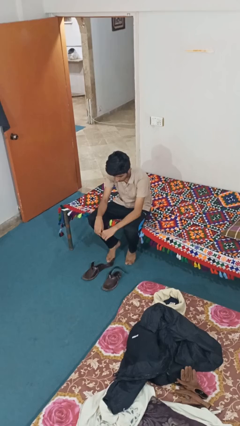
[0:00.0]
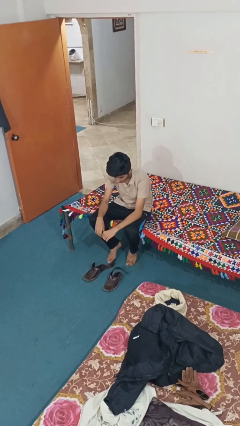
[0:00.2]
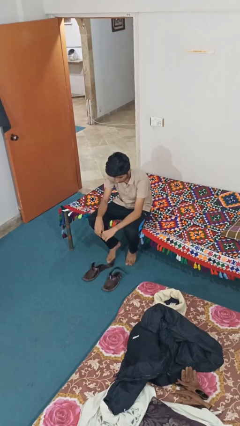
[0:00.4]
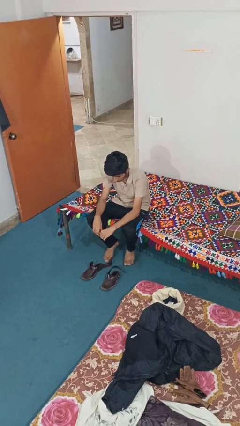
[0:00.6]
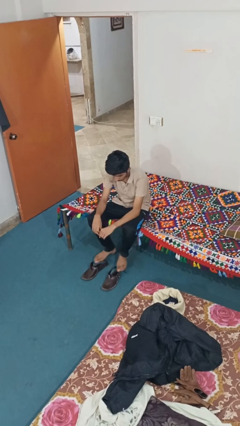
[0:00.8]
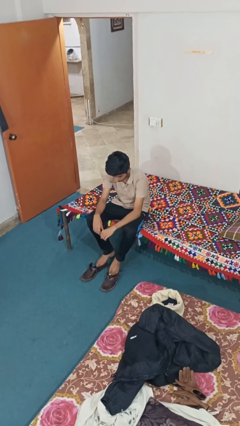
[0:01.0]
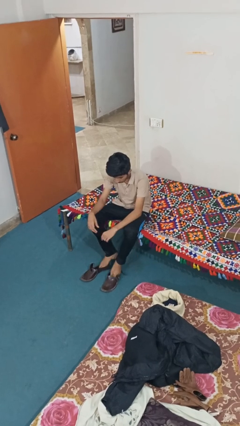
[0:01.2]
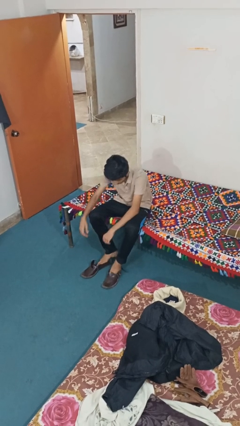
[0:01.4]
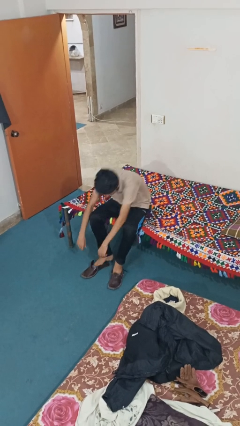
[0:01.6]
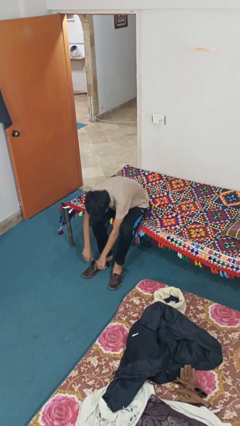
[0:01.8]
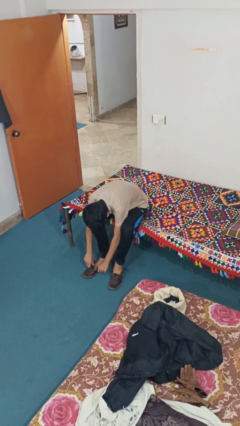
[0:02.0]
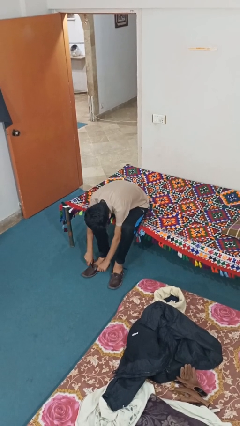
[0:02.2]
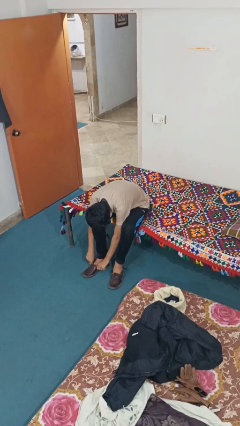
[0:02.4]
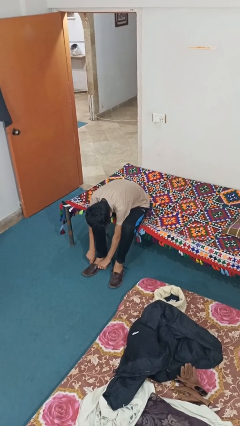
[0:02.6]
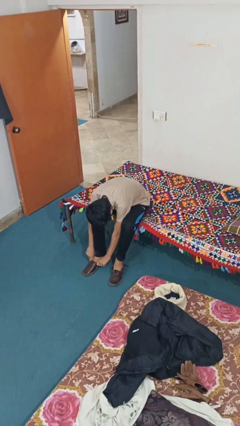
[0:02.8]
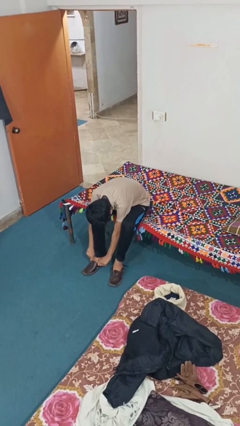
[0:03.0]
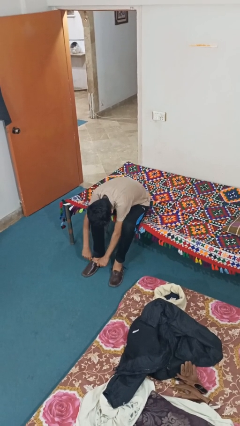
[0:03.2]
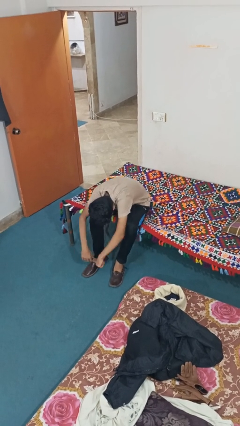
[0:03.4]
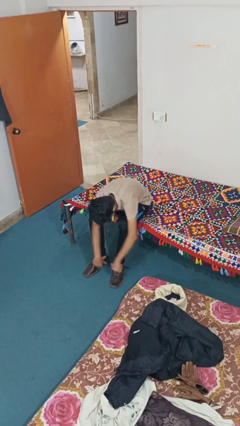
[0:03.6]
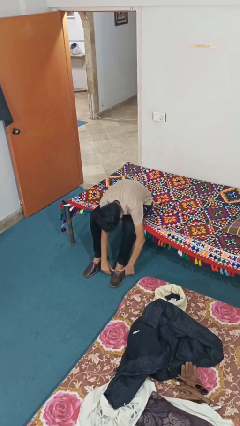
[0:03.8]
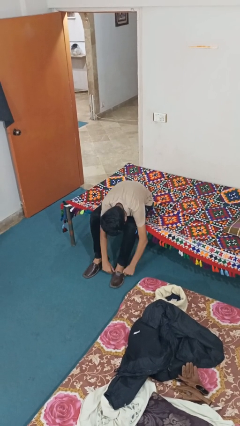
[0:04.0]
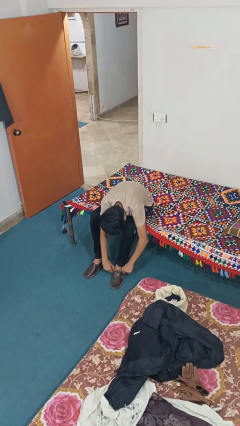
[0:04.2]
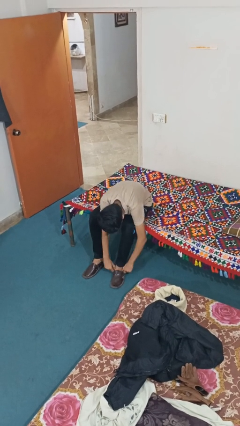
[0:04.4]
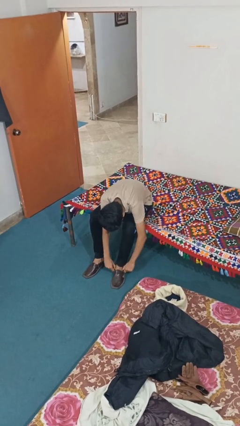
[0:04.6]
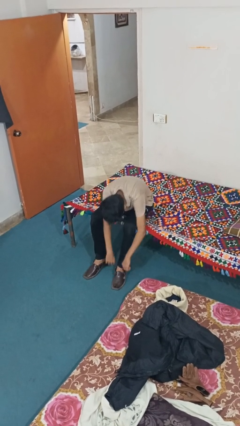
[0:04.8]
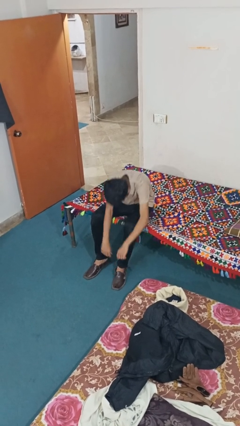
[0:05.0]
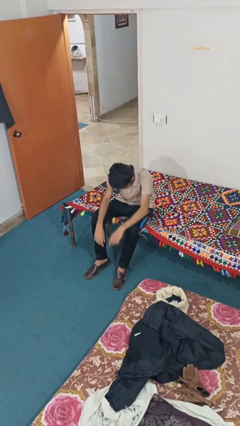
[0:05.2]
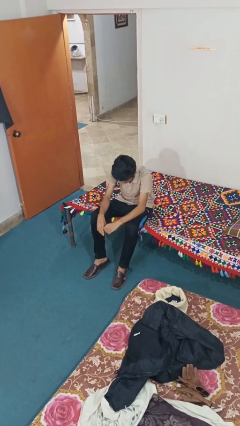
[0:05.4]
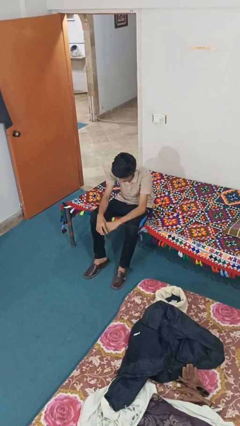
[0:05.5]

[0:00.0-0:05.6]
person puts on shoes

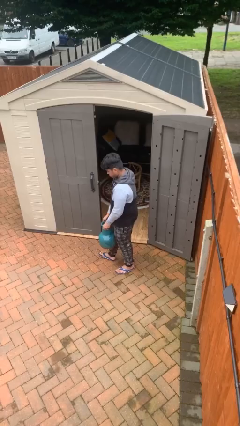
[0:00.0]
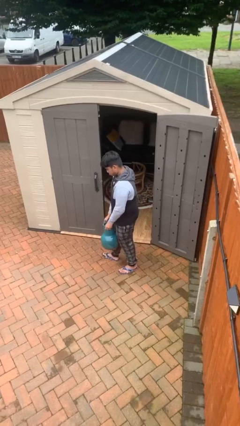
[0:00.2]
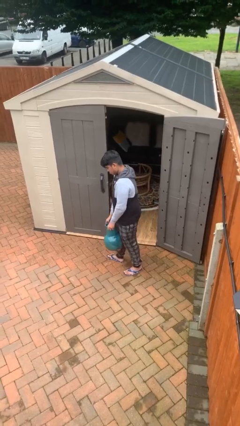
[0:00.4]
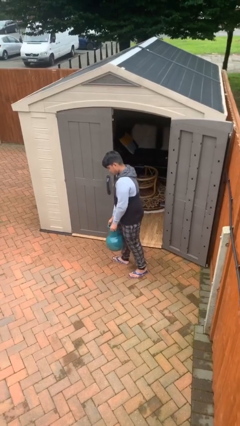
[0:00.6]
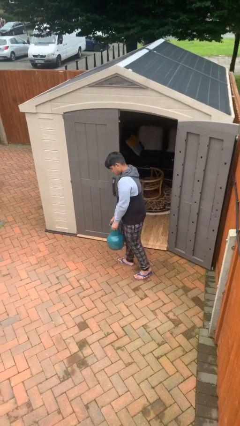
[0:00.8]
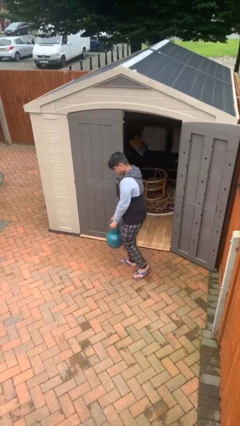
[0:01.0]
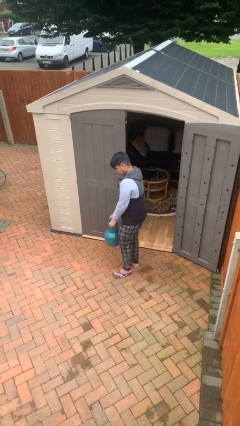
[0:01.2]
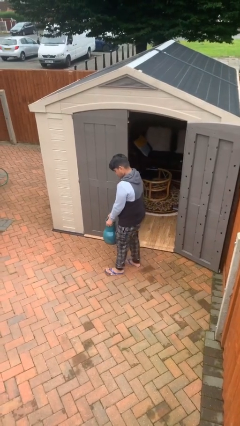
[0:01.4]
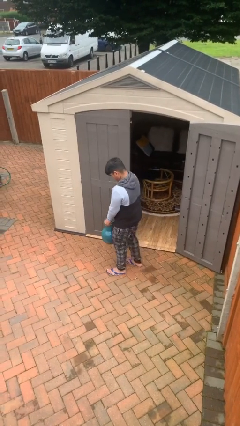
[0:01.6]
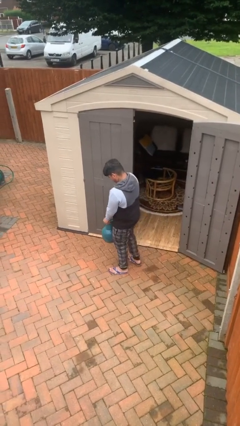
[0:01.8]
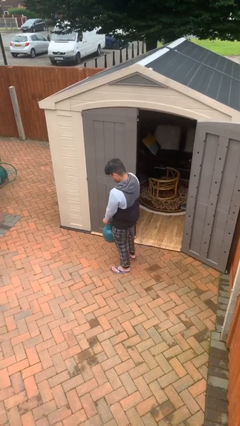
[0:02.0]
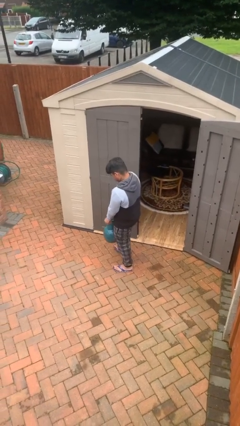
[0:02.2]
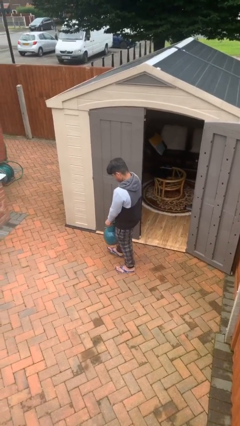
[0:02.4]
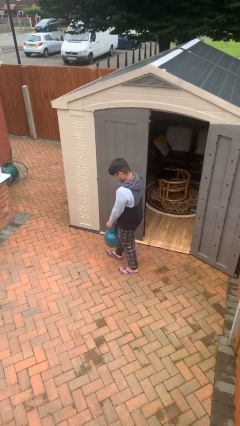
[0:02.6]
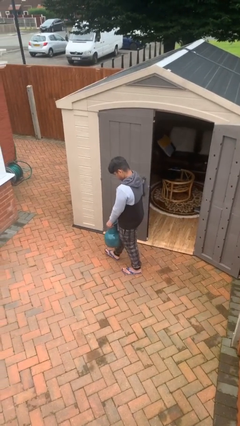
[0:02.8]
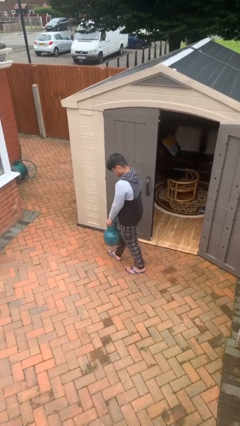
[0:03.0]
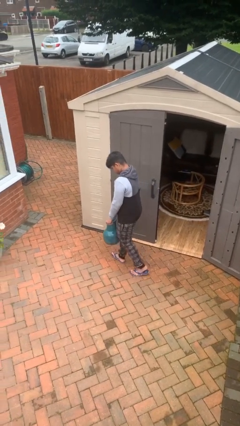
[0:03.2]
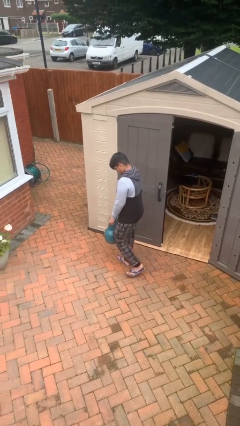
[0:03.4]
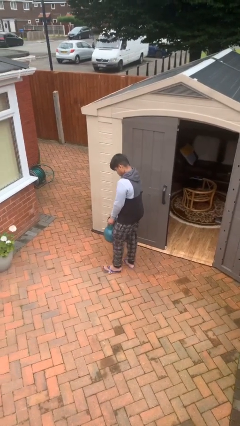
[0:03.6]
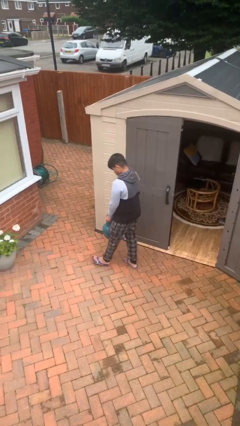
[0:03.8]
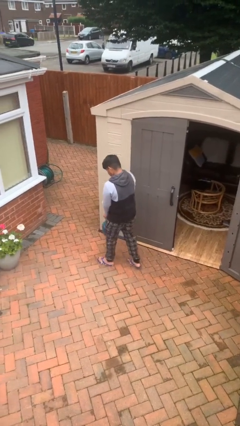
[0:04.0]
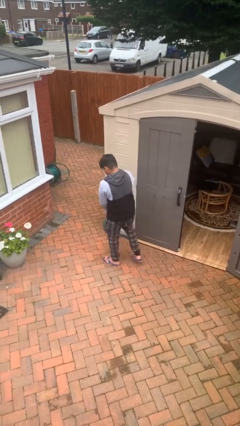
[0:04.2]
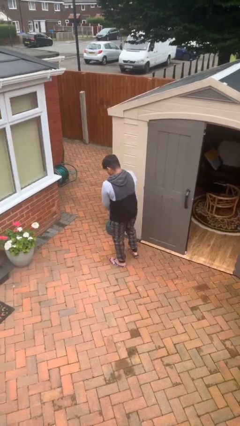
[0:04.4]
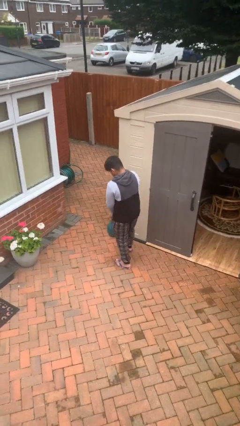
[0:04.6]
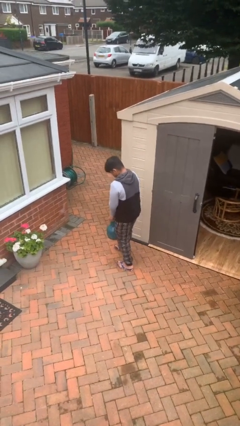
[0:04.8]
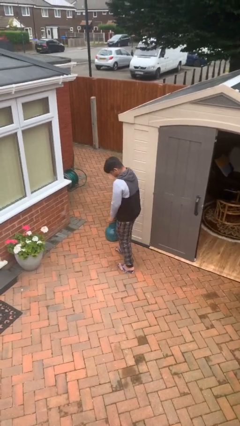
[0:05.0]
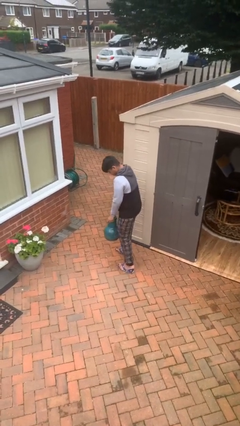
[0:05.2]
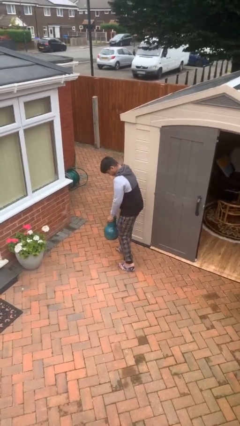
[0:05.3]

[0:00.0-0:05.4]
person carries heavy object

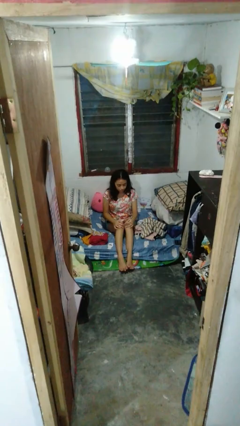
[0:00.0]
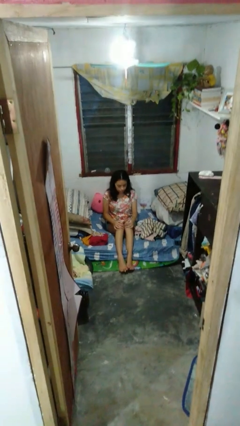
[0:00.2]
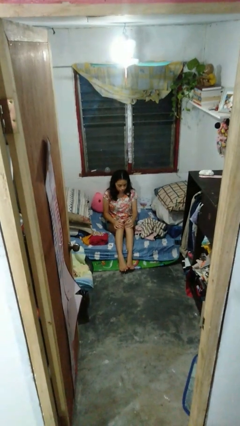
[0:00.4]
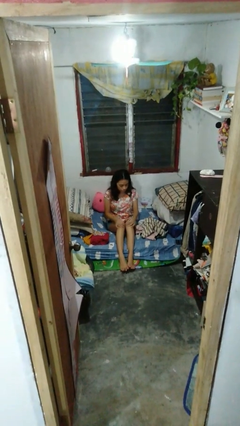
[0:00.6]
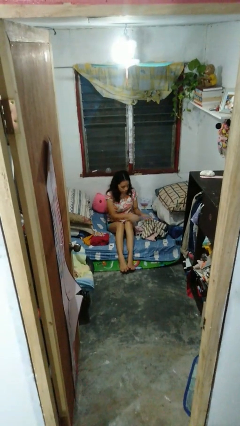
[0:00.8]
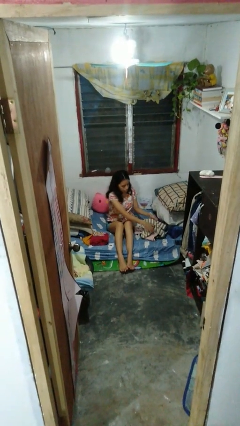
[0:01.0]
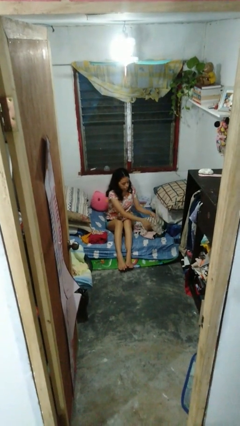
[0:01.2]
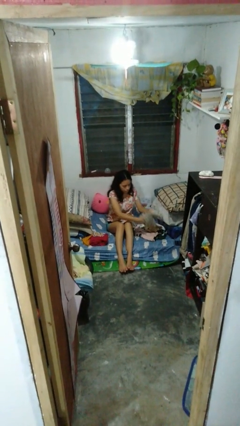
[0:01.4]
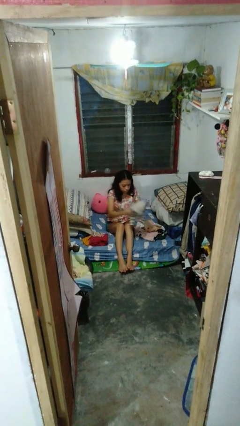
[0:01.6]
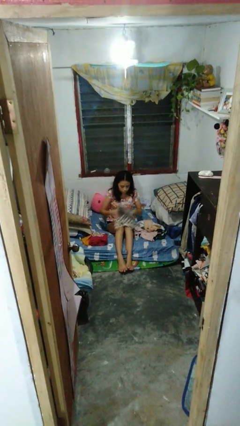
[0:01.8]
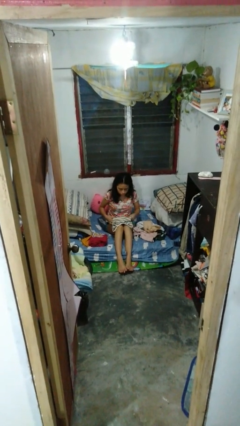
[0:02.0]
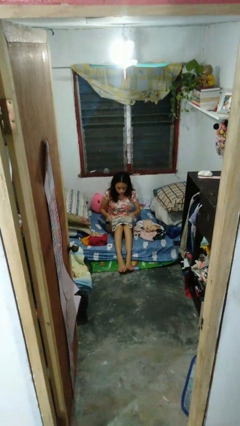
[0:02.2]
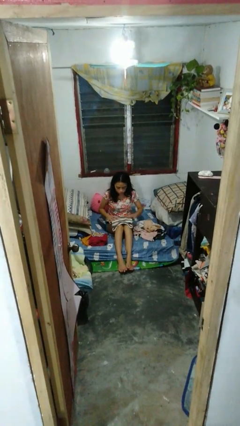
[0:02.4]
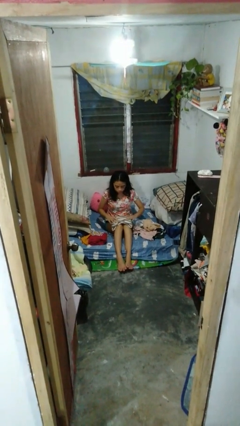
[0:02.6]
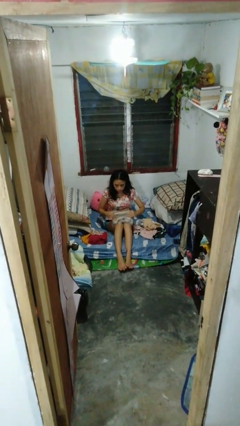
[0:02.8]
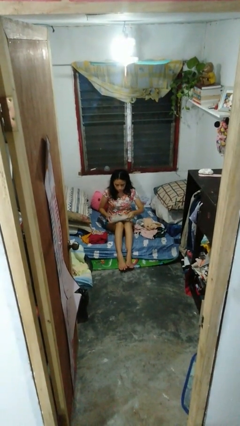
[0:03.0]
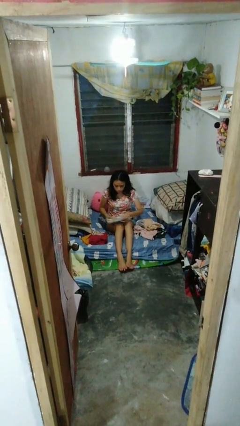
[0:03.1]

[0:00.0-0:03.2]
person folds shirt

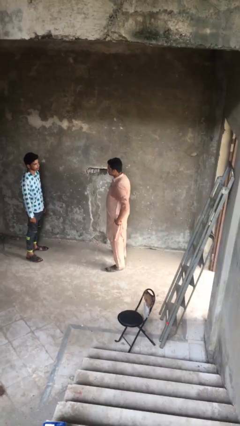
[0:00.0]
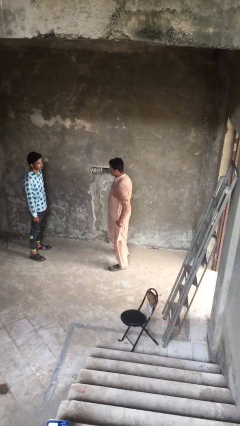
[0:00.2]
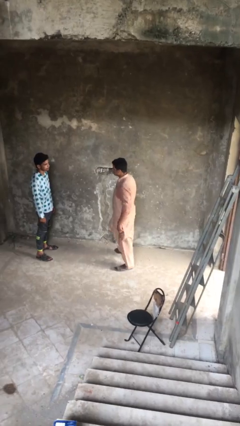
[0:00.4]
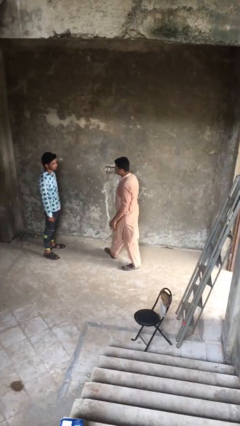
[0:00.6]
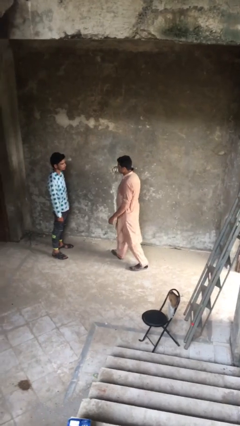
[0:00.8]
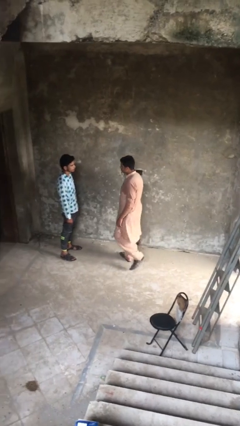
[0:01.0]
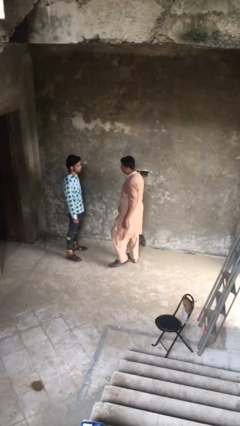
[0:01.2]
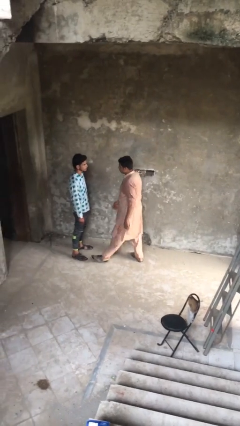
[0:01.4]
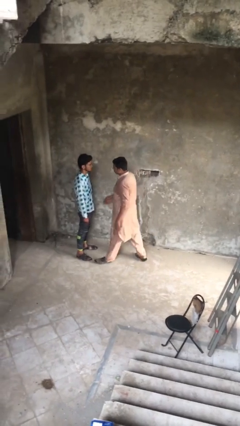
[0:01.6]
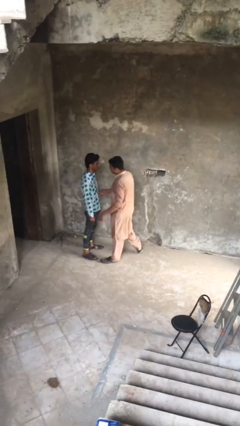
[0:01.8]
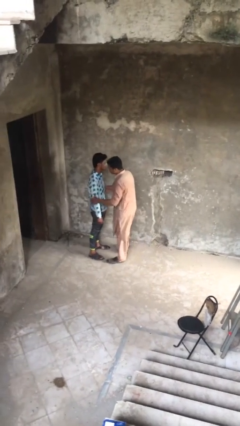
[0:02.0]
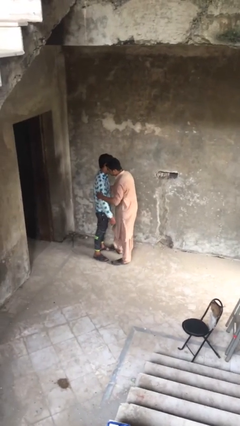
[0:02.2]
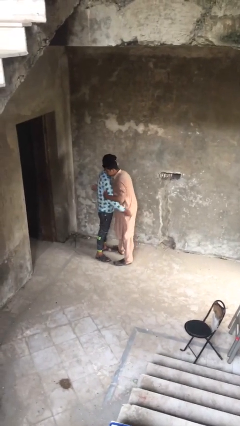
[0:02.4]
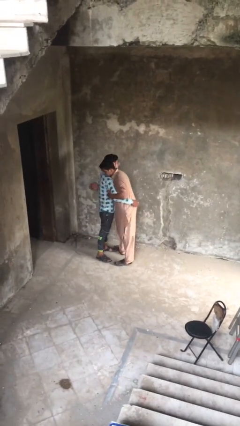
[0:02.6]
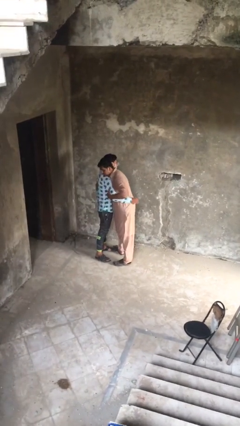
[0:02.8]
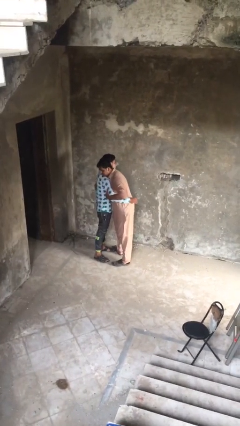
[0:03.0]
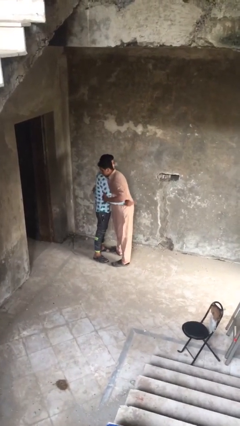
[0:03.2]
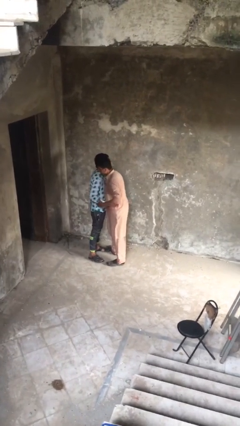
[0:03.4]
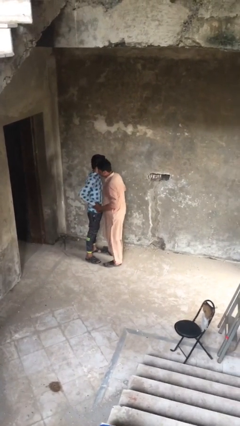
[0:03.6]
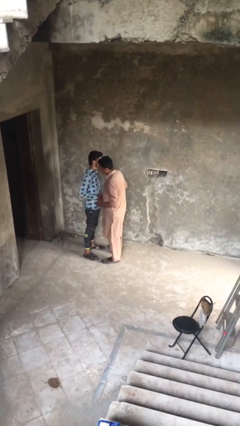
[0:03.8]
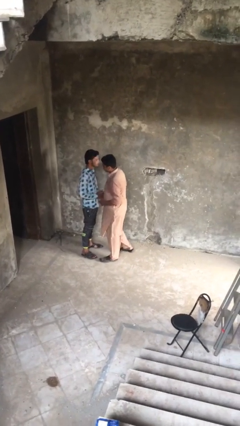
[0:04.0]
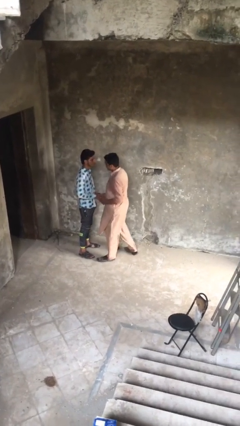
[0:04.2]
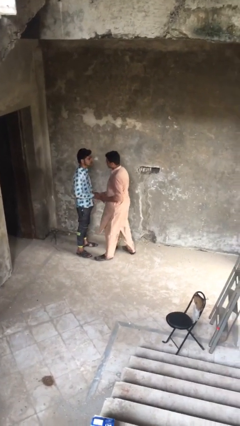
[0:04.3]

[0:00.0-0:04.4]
person embraces person
